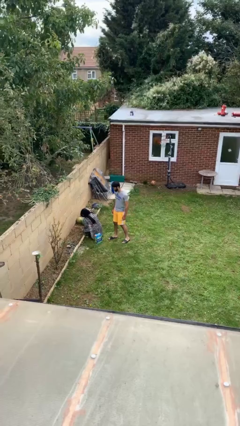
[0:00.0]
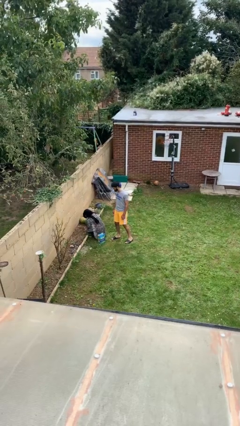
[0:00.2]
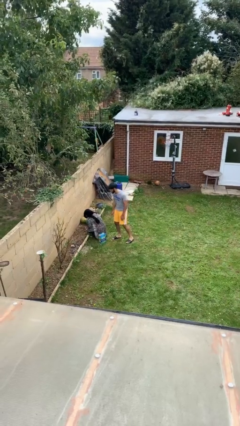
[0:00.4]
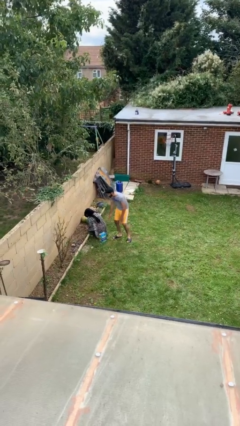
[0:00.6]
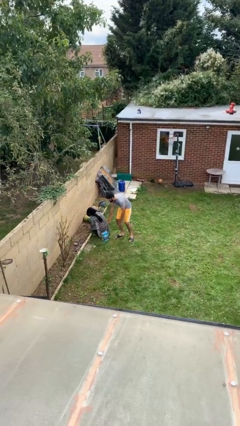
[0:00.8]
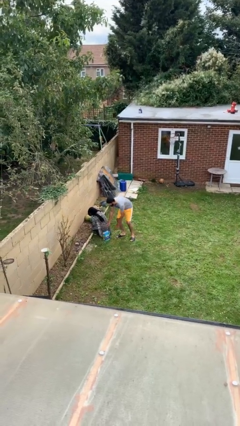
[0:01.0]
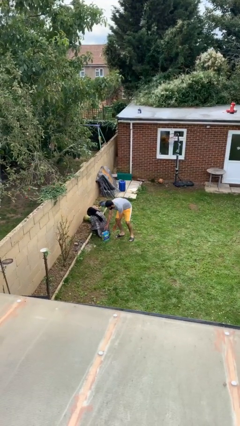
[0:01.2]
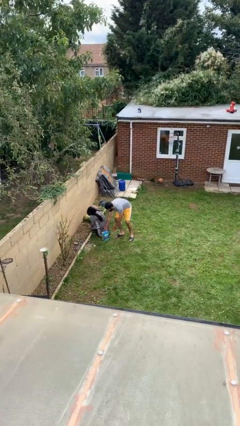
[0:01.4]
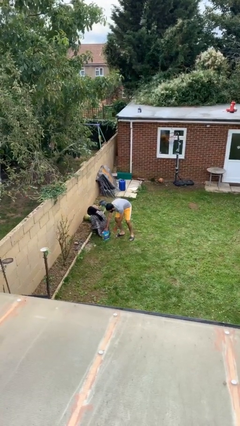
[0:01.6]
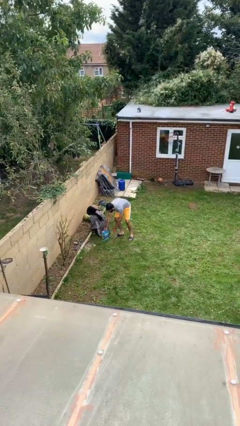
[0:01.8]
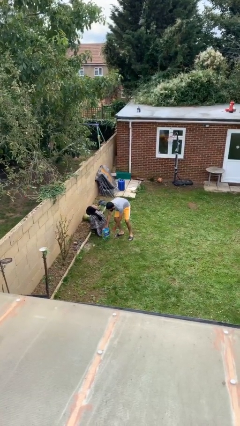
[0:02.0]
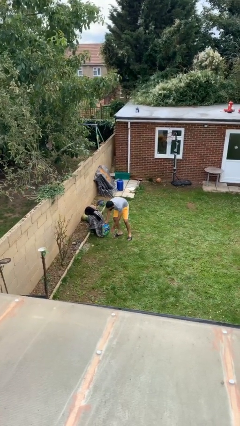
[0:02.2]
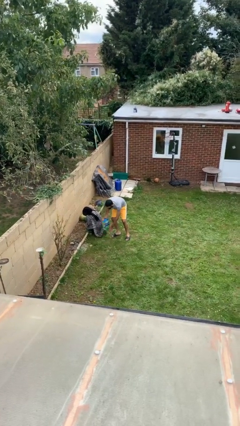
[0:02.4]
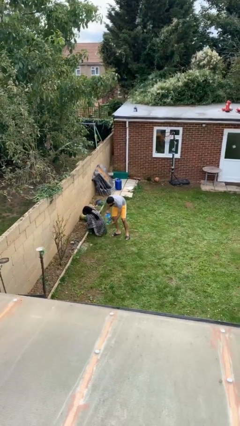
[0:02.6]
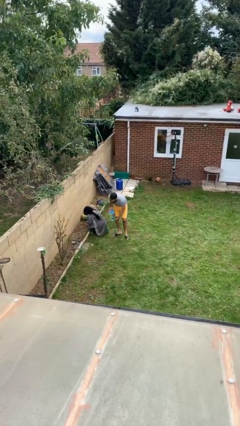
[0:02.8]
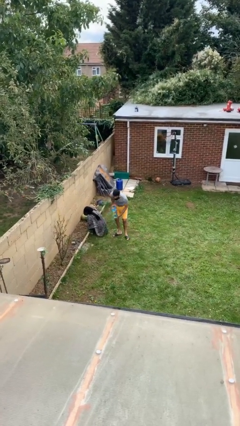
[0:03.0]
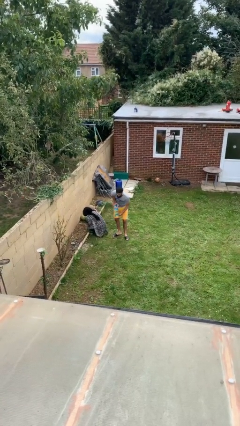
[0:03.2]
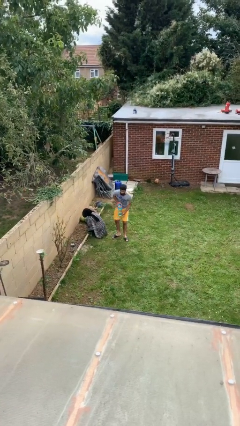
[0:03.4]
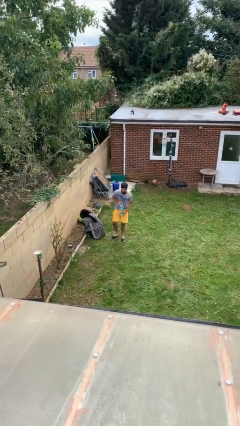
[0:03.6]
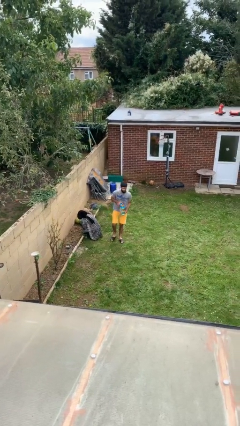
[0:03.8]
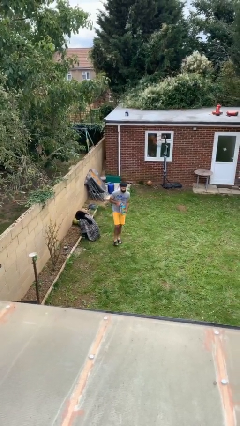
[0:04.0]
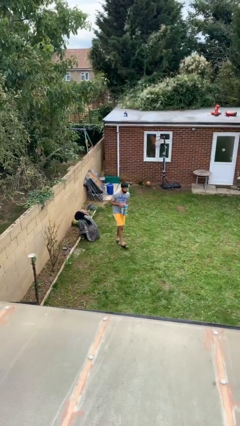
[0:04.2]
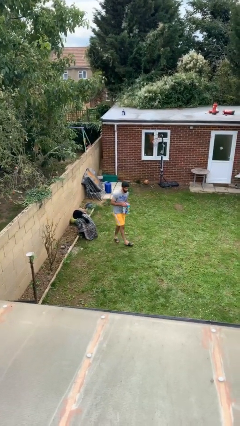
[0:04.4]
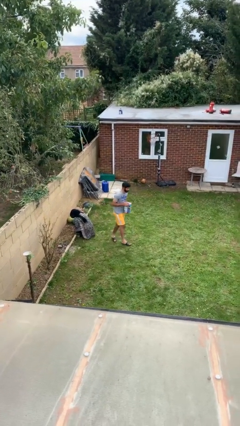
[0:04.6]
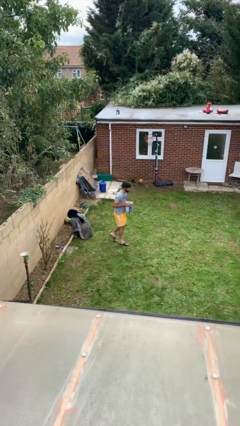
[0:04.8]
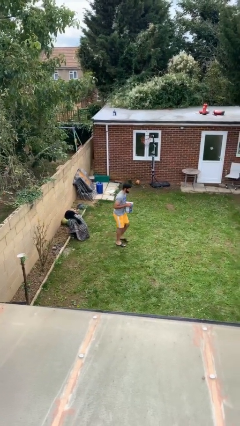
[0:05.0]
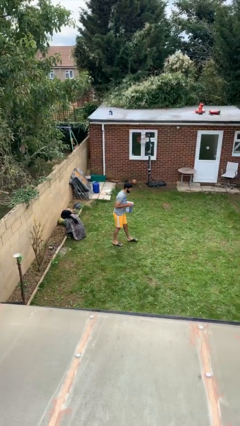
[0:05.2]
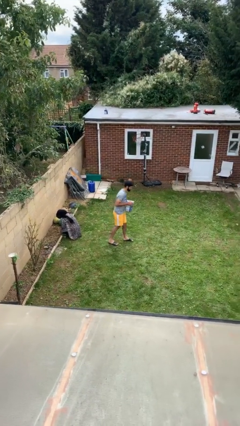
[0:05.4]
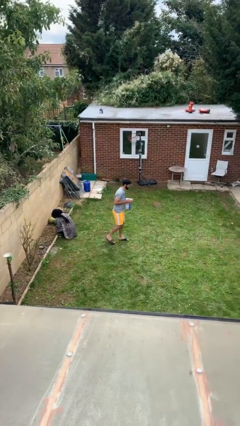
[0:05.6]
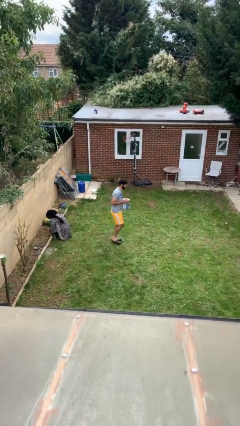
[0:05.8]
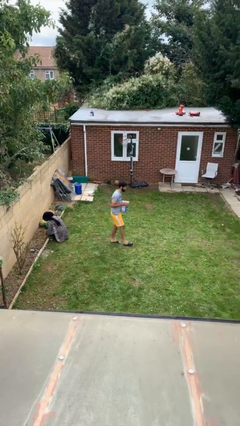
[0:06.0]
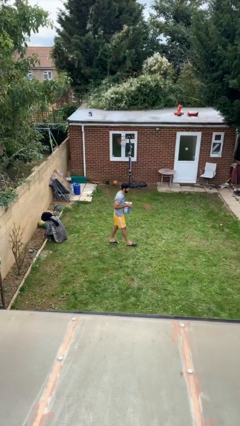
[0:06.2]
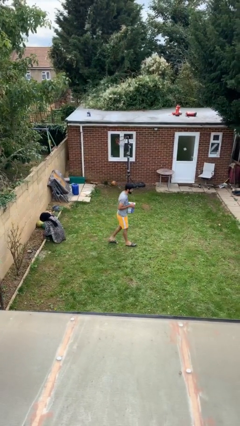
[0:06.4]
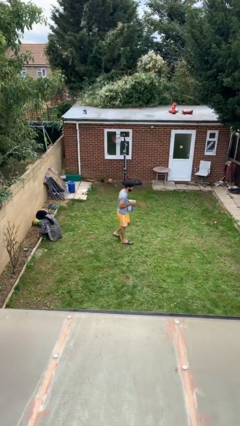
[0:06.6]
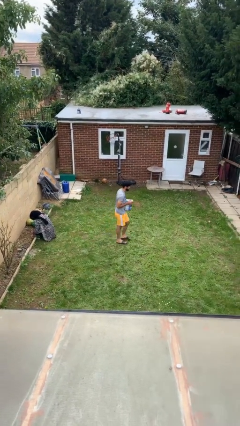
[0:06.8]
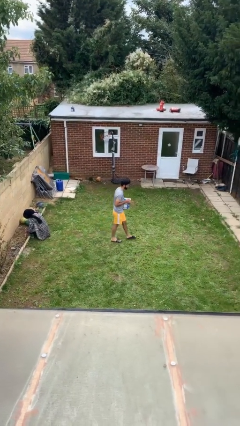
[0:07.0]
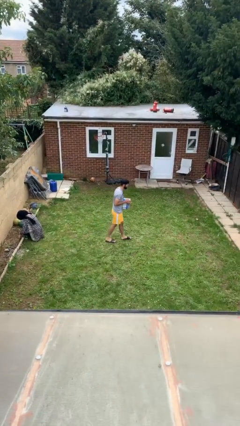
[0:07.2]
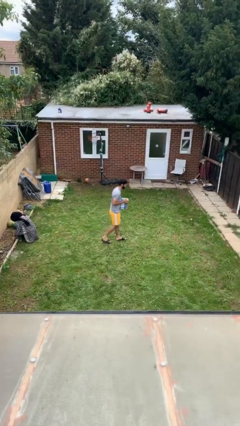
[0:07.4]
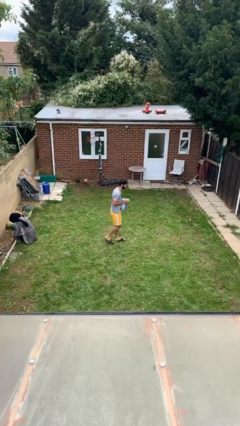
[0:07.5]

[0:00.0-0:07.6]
person steals object from person

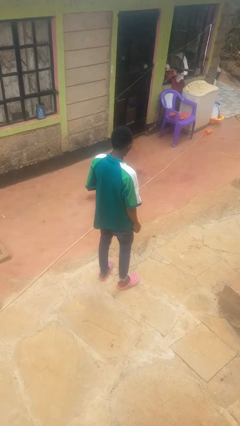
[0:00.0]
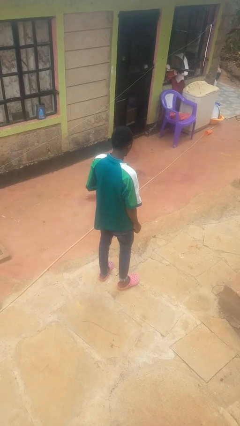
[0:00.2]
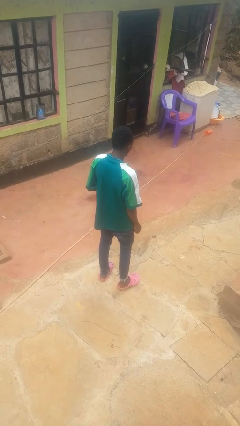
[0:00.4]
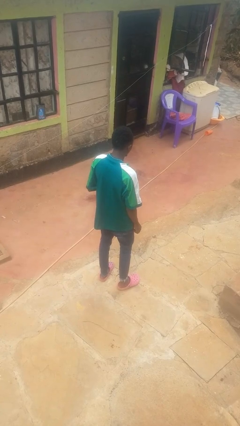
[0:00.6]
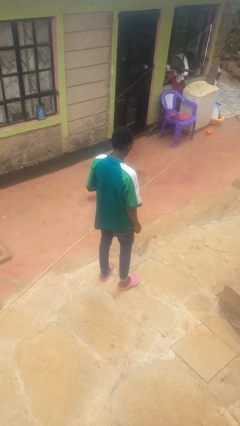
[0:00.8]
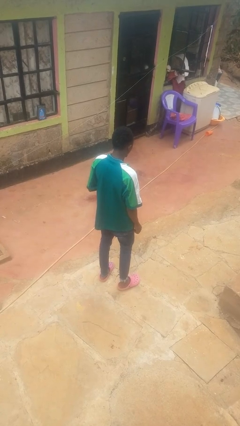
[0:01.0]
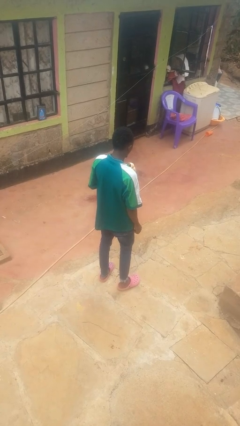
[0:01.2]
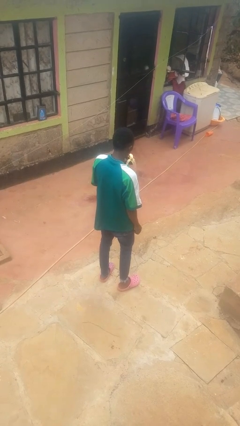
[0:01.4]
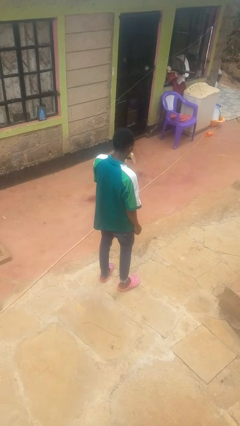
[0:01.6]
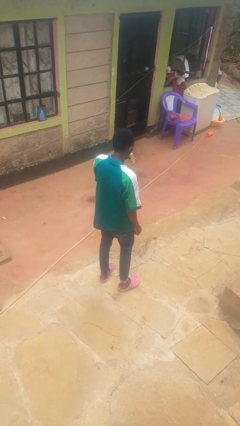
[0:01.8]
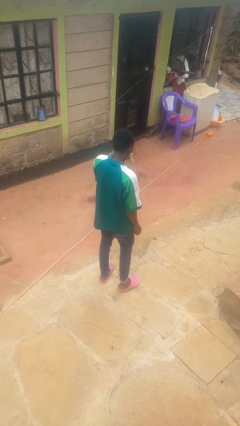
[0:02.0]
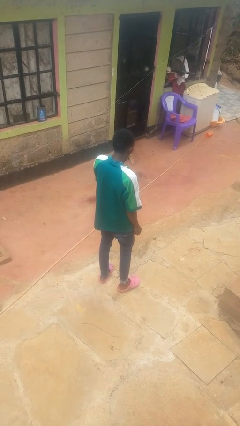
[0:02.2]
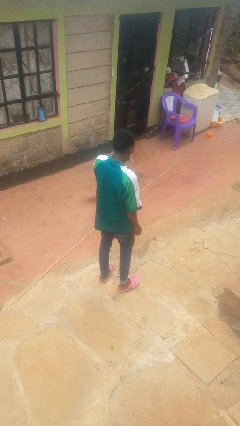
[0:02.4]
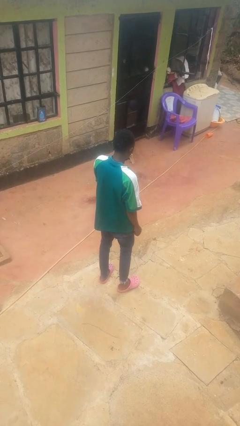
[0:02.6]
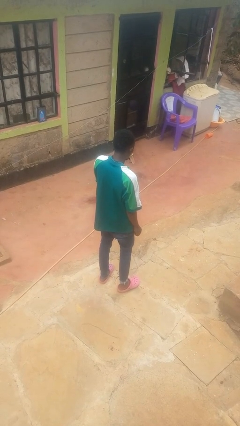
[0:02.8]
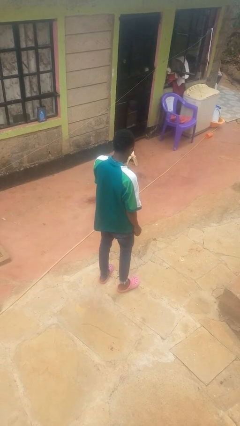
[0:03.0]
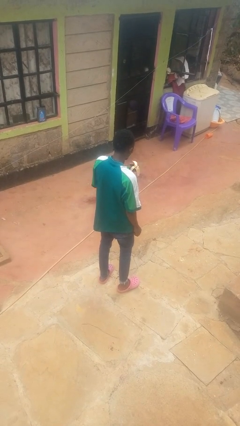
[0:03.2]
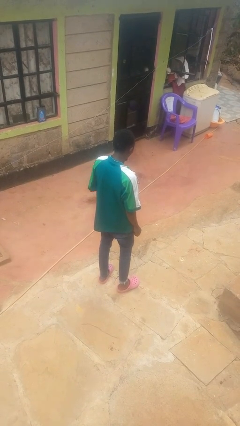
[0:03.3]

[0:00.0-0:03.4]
person eats banana

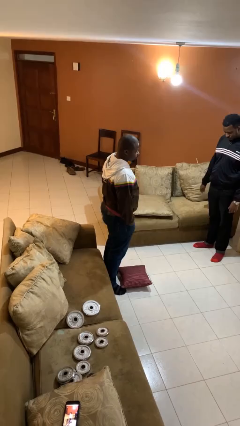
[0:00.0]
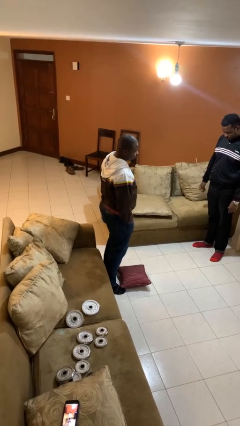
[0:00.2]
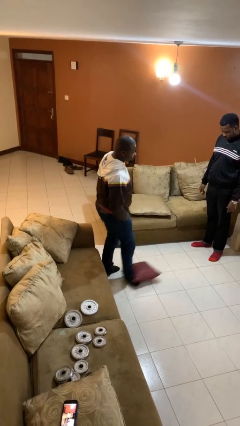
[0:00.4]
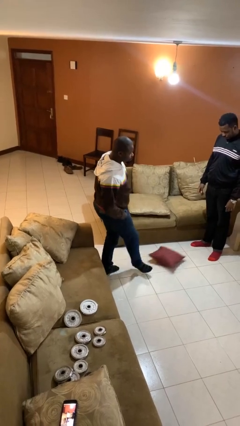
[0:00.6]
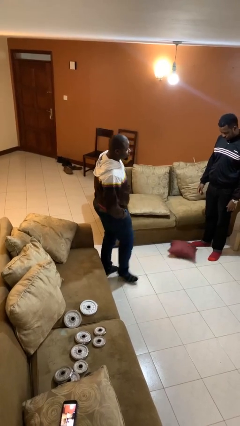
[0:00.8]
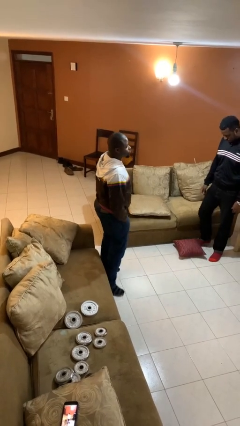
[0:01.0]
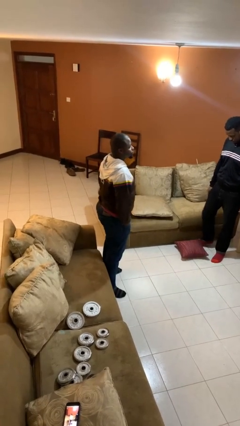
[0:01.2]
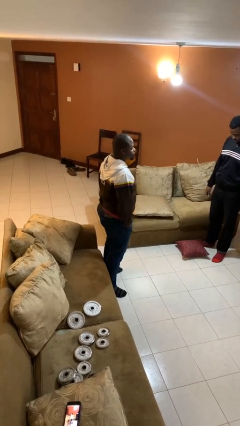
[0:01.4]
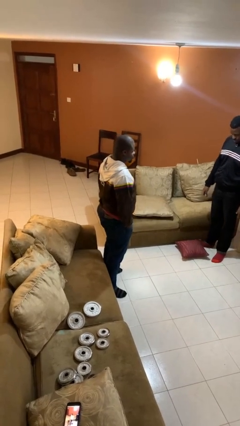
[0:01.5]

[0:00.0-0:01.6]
person kicks object to person

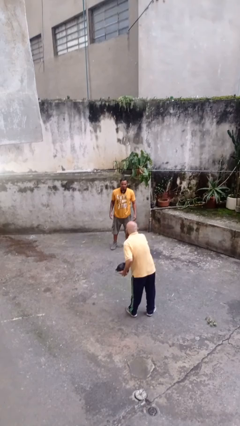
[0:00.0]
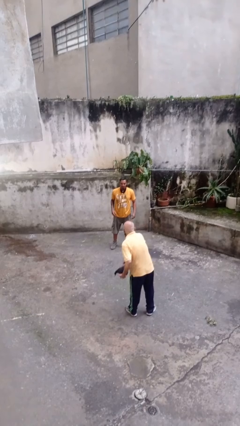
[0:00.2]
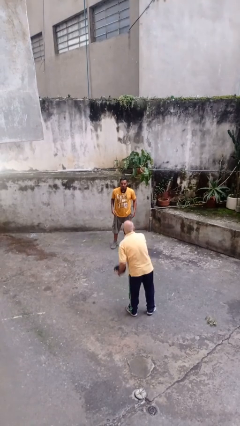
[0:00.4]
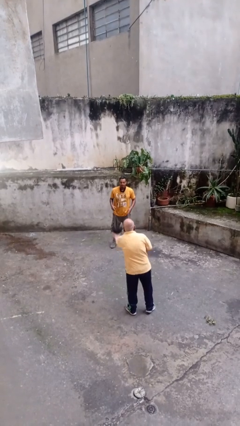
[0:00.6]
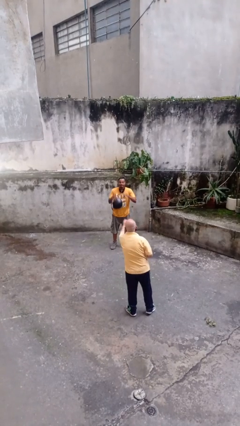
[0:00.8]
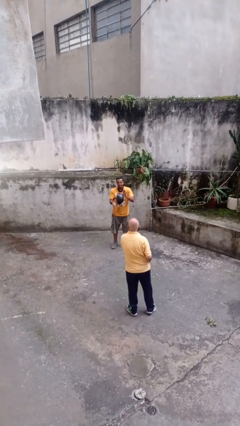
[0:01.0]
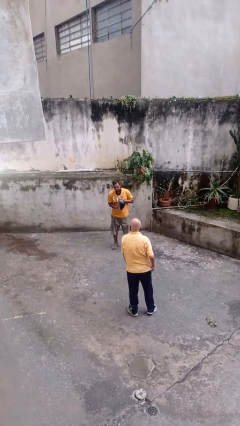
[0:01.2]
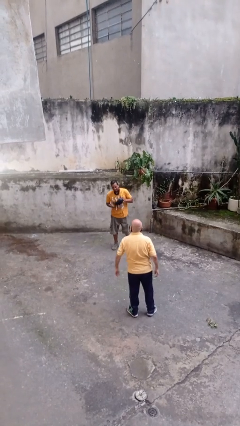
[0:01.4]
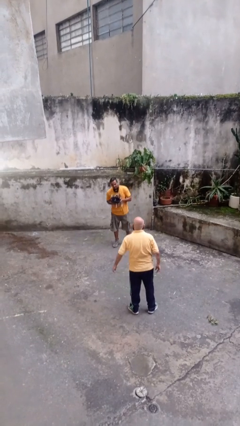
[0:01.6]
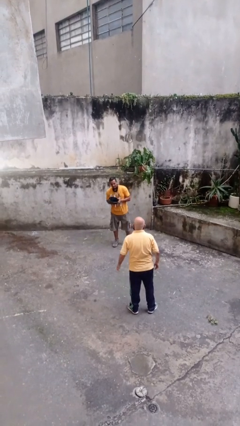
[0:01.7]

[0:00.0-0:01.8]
person catches object from person

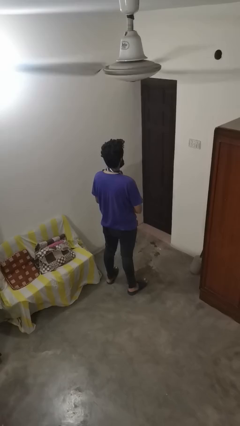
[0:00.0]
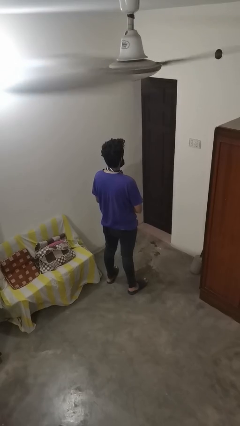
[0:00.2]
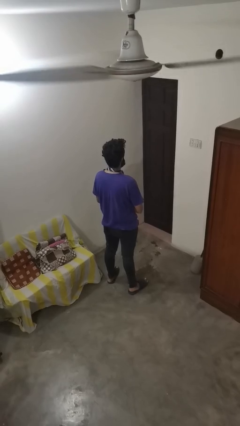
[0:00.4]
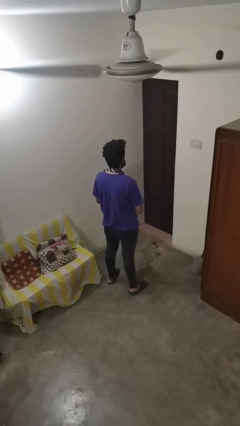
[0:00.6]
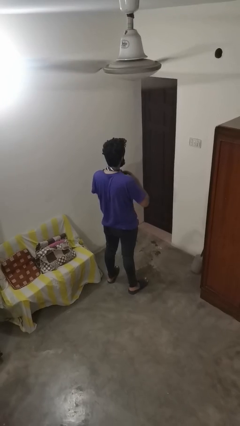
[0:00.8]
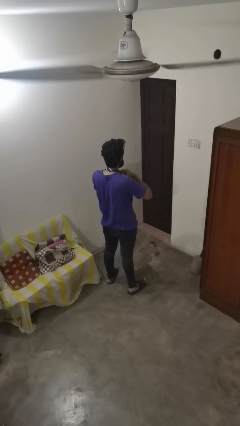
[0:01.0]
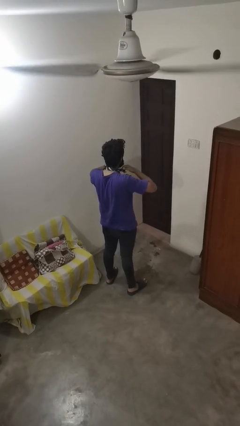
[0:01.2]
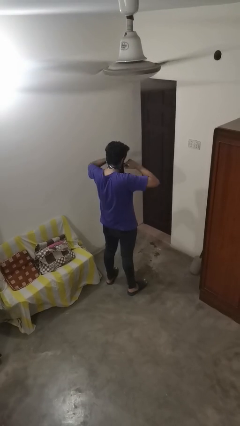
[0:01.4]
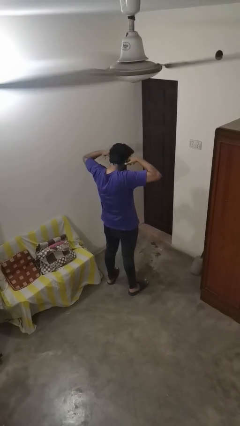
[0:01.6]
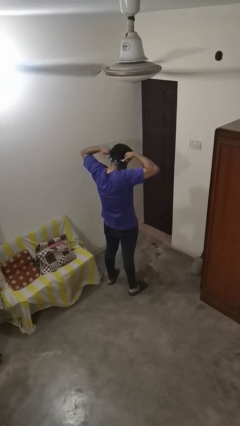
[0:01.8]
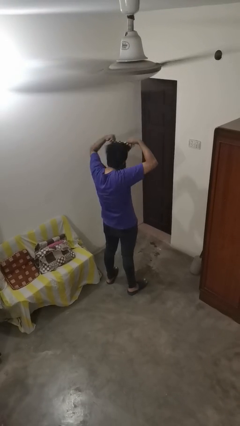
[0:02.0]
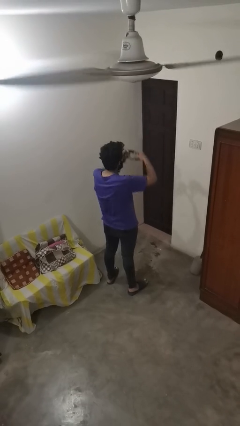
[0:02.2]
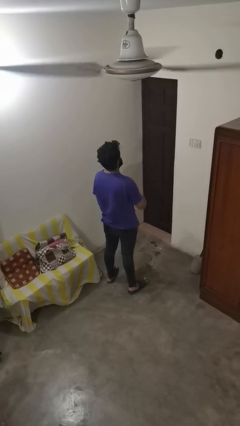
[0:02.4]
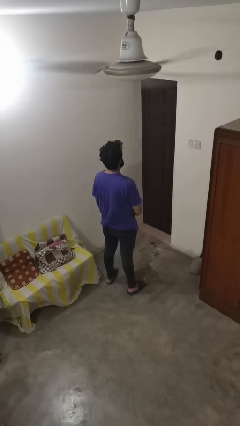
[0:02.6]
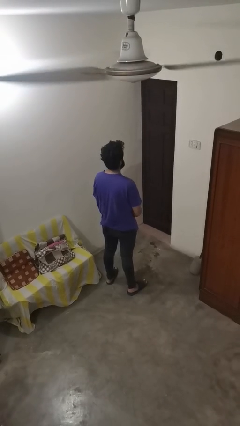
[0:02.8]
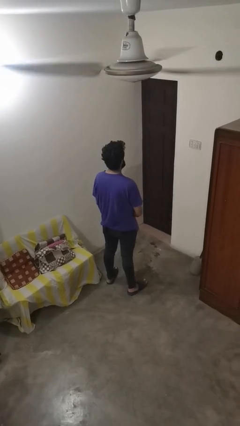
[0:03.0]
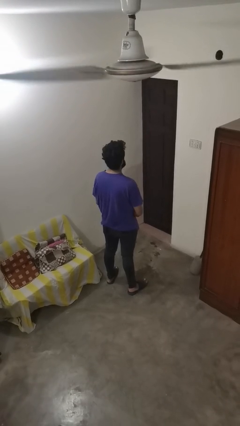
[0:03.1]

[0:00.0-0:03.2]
person takes off necktie
